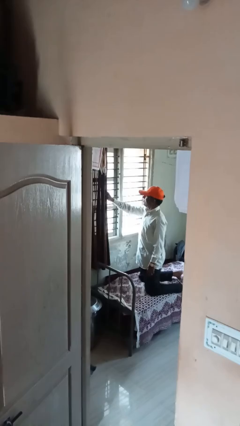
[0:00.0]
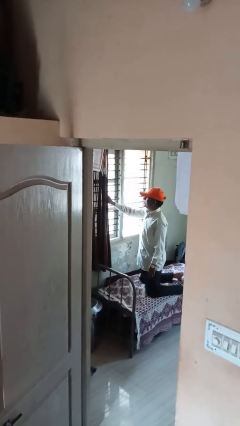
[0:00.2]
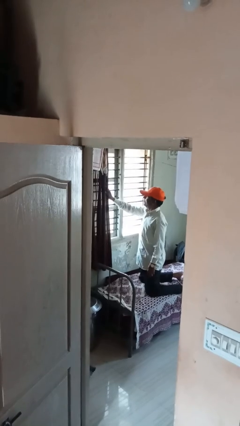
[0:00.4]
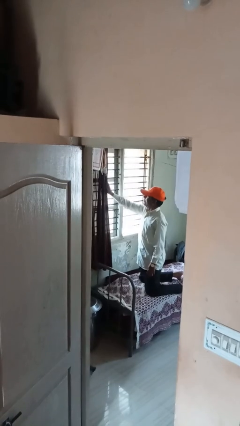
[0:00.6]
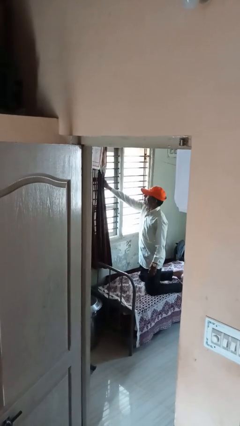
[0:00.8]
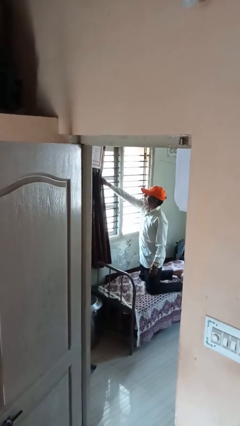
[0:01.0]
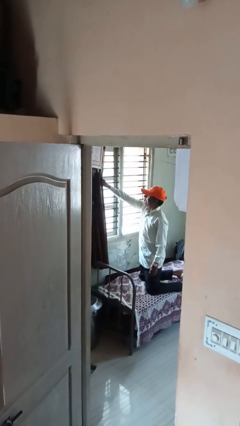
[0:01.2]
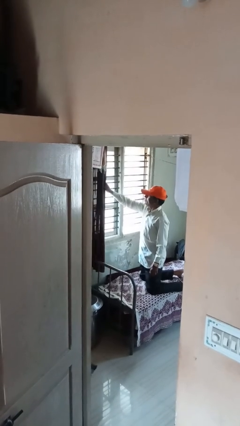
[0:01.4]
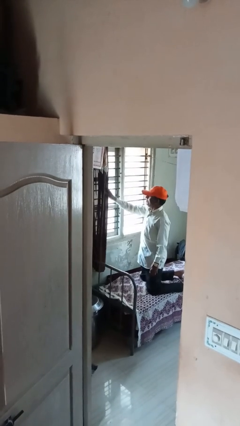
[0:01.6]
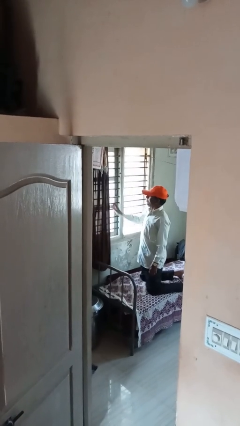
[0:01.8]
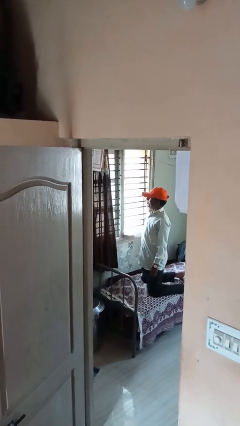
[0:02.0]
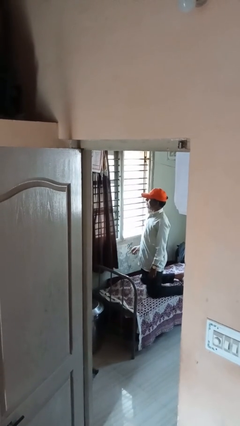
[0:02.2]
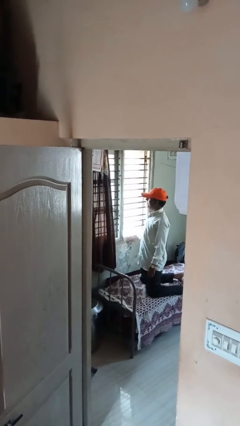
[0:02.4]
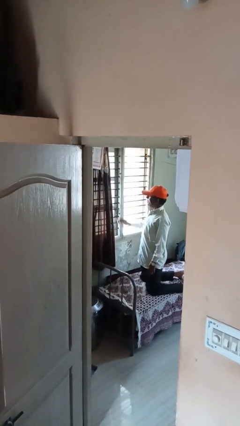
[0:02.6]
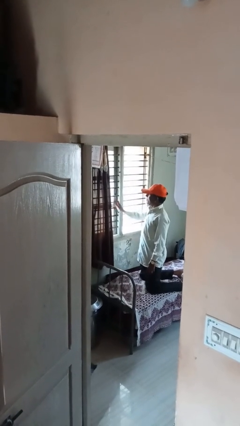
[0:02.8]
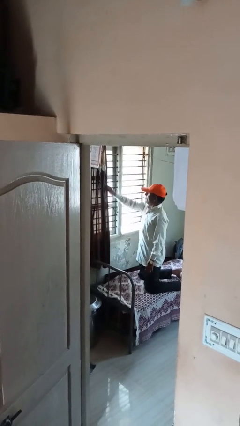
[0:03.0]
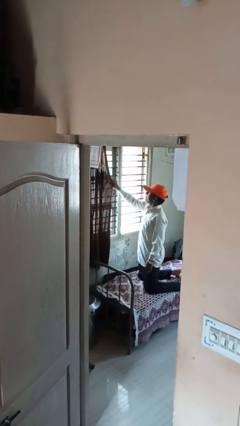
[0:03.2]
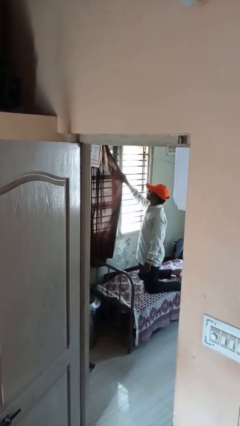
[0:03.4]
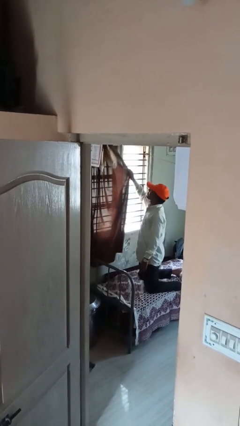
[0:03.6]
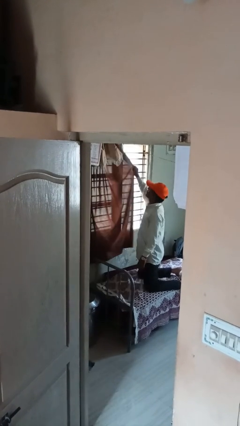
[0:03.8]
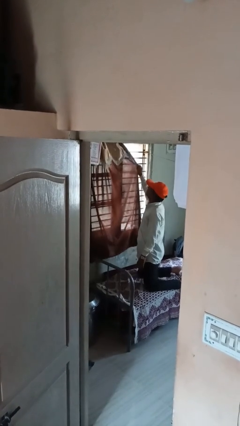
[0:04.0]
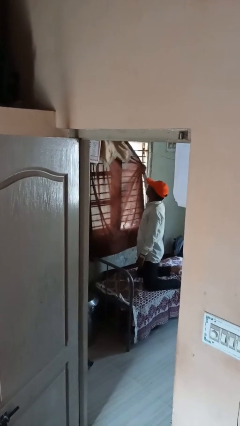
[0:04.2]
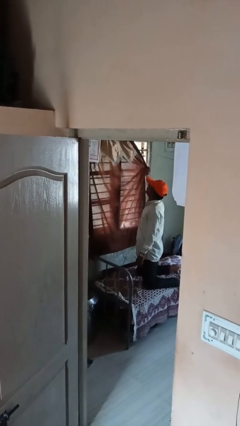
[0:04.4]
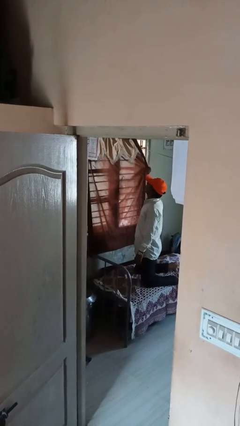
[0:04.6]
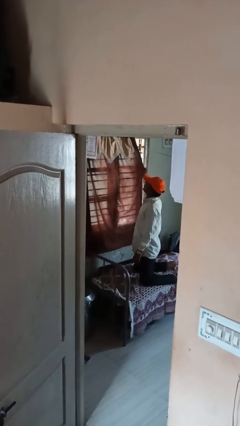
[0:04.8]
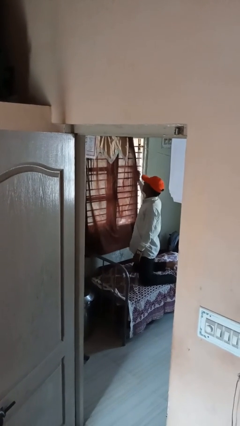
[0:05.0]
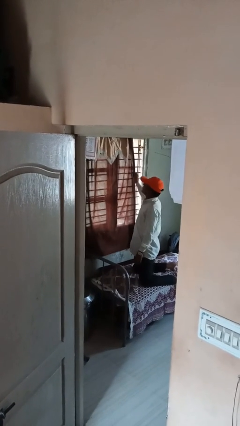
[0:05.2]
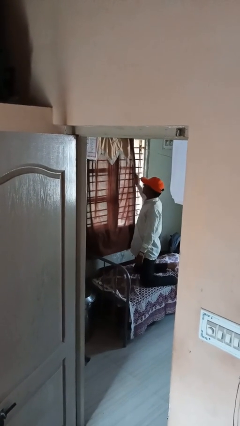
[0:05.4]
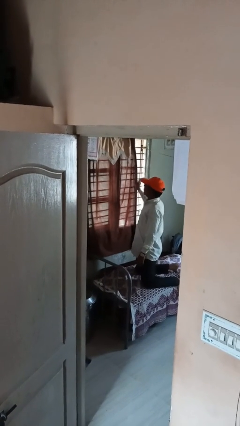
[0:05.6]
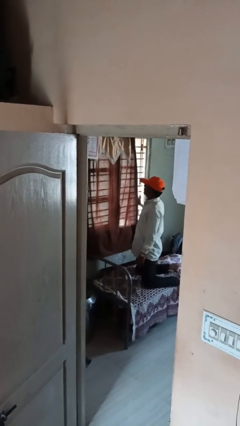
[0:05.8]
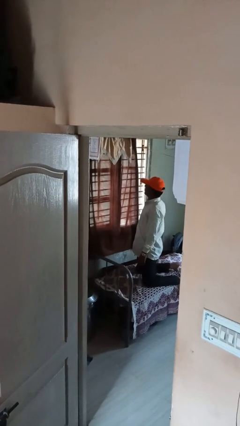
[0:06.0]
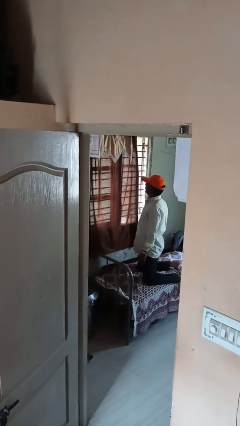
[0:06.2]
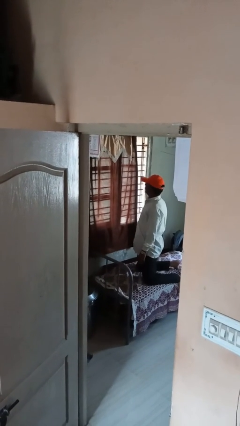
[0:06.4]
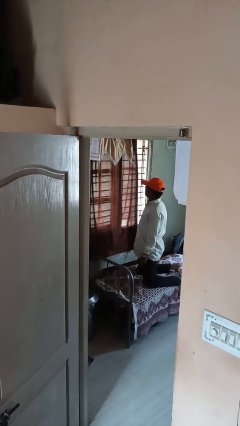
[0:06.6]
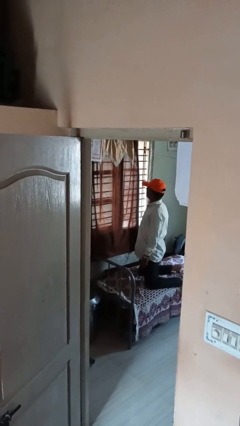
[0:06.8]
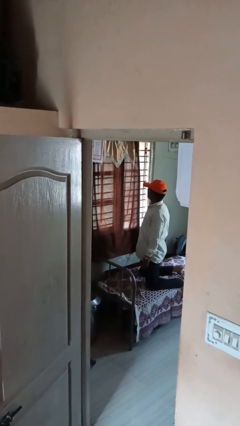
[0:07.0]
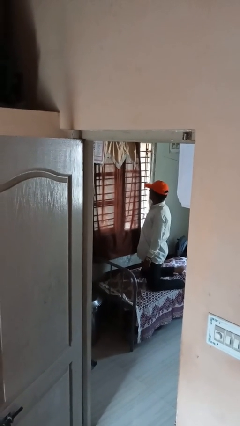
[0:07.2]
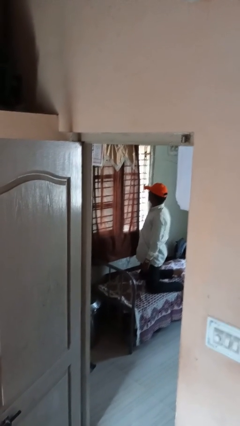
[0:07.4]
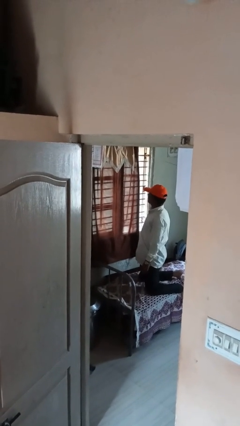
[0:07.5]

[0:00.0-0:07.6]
person closes curtains

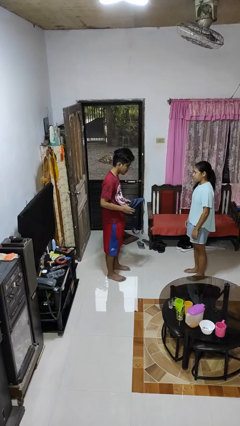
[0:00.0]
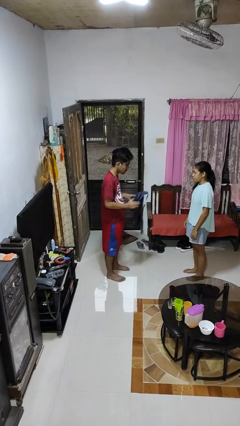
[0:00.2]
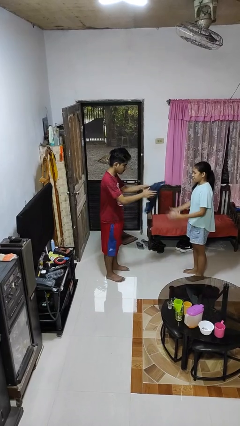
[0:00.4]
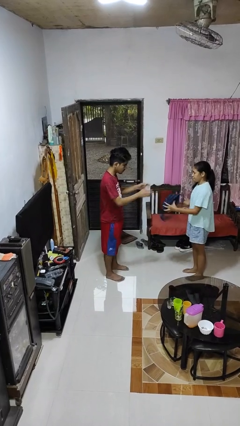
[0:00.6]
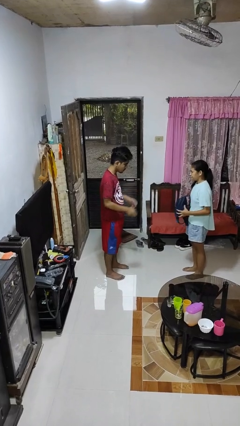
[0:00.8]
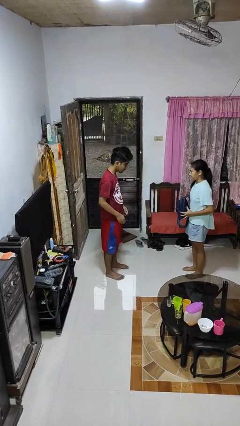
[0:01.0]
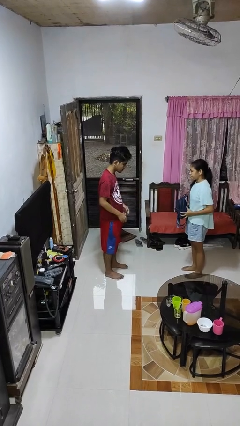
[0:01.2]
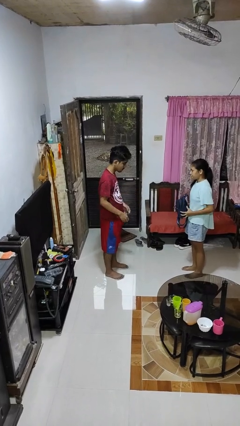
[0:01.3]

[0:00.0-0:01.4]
person throws object to person

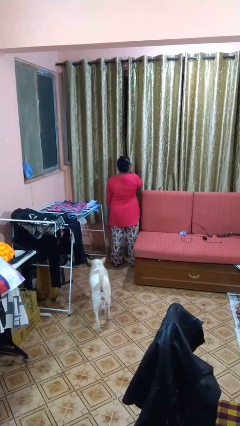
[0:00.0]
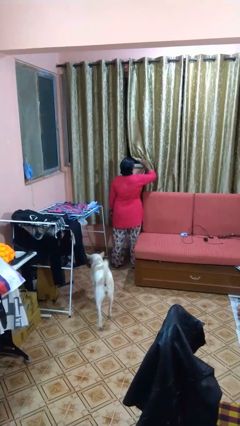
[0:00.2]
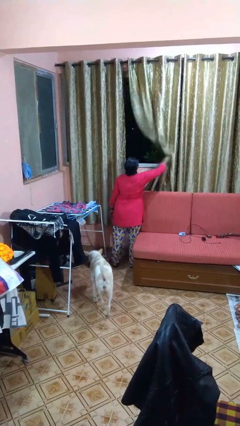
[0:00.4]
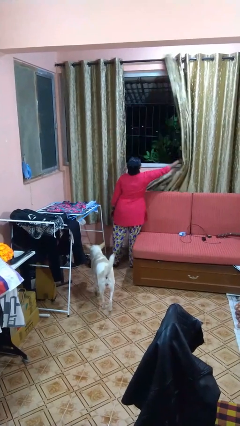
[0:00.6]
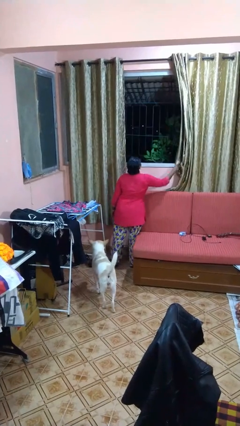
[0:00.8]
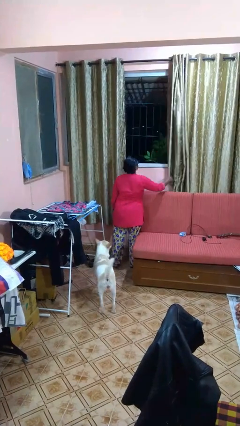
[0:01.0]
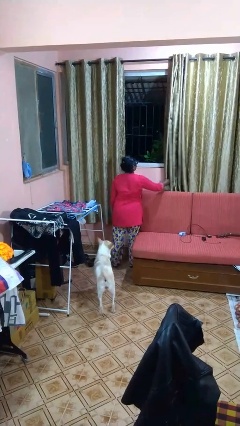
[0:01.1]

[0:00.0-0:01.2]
person opens curtains

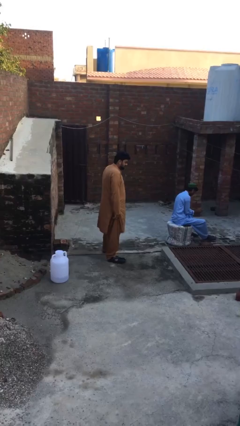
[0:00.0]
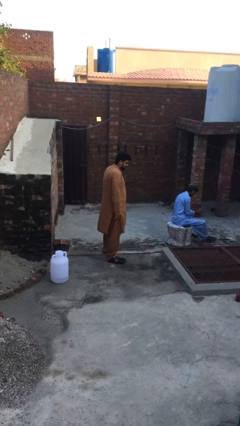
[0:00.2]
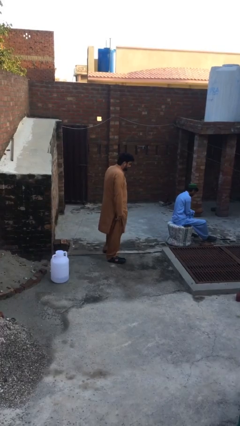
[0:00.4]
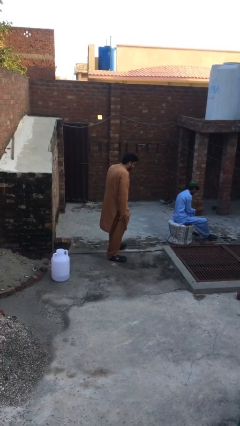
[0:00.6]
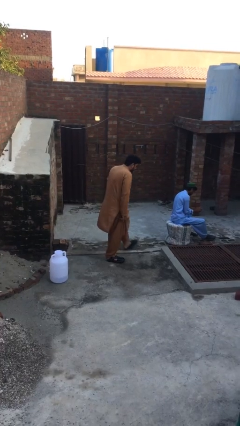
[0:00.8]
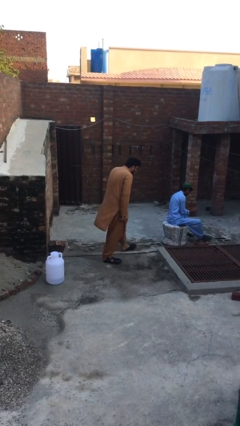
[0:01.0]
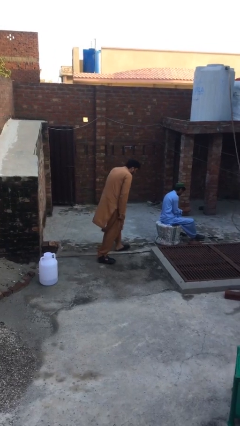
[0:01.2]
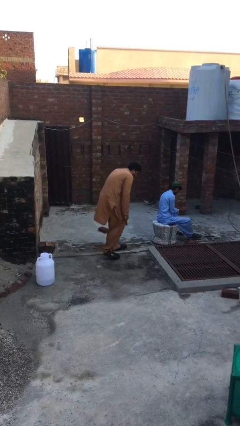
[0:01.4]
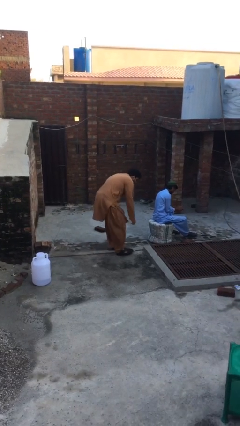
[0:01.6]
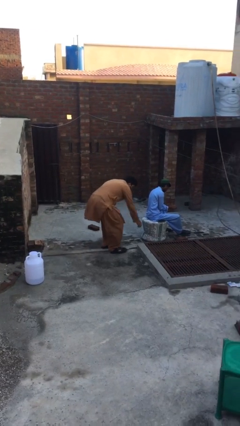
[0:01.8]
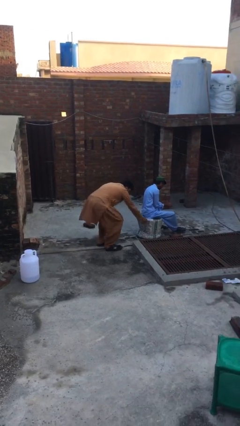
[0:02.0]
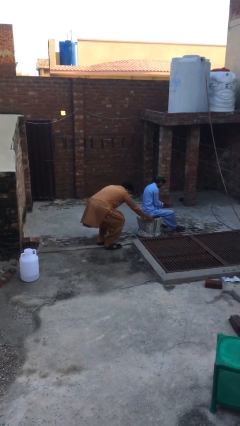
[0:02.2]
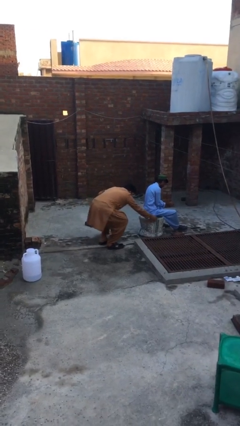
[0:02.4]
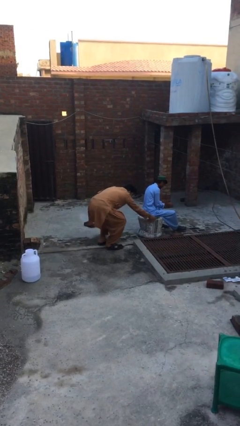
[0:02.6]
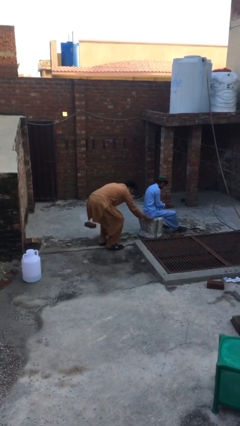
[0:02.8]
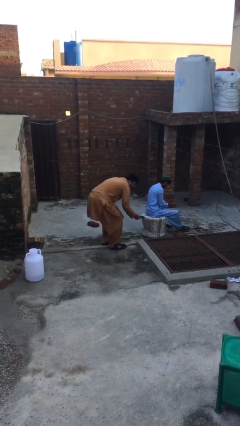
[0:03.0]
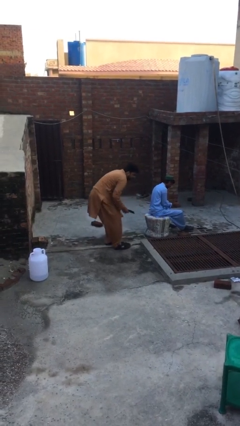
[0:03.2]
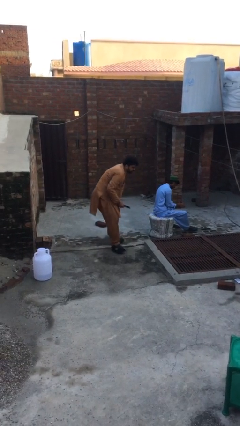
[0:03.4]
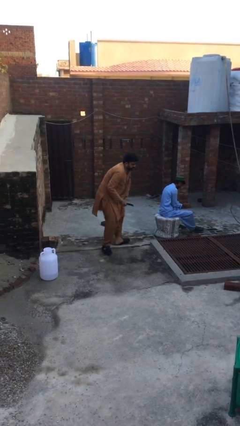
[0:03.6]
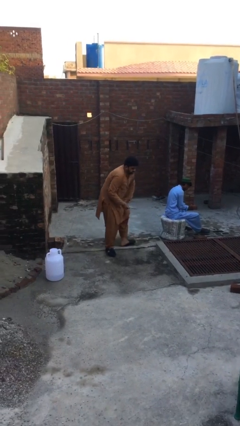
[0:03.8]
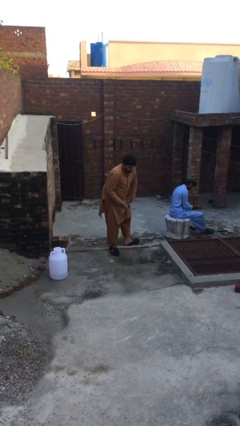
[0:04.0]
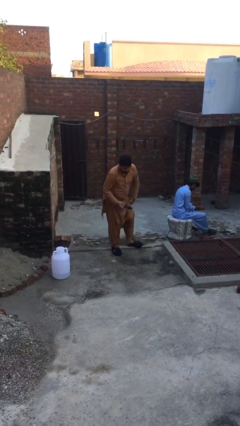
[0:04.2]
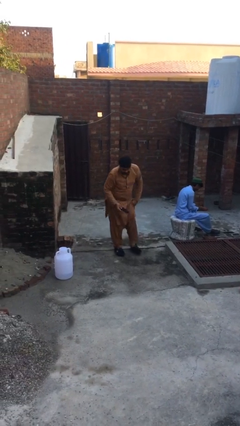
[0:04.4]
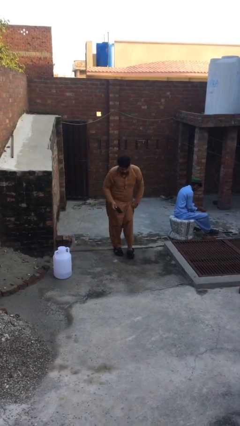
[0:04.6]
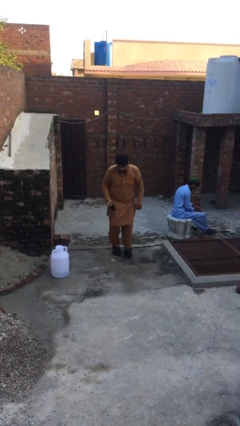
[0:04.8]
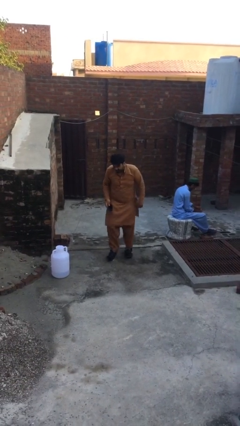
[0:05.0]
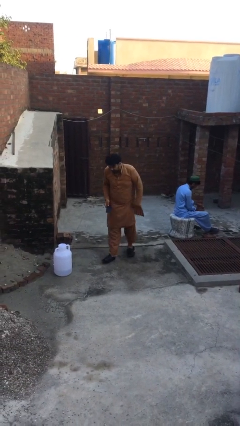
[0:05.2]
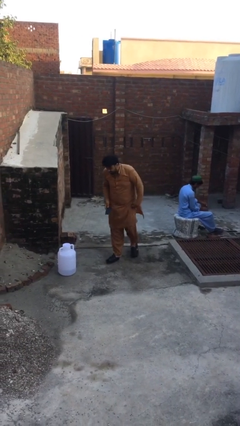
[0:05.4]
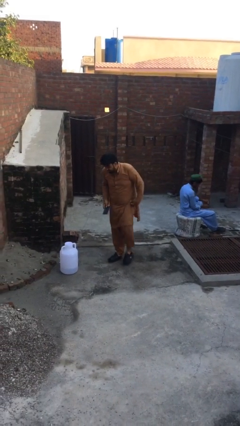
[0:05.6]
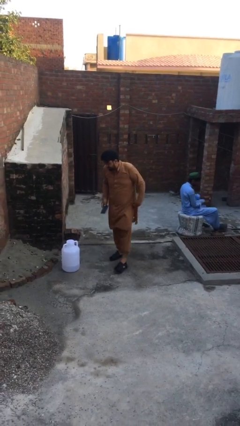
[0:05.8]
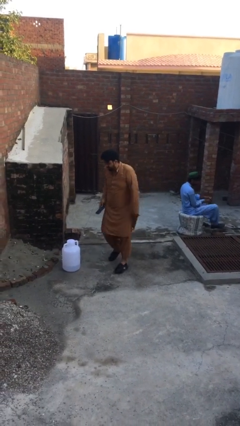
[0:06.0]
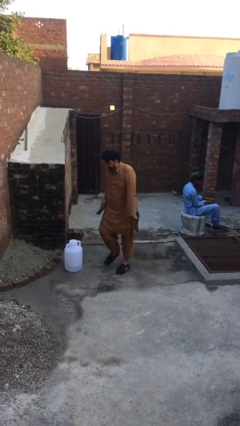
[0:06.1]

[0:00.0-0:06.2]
person steals object from person

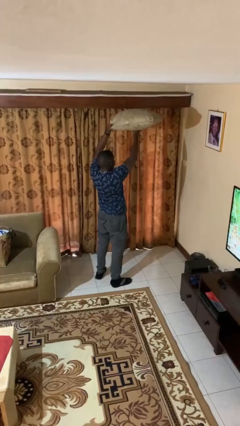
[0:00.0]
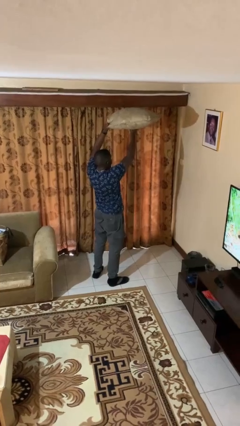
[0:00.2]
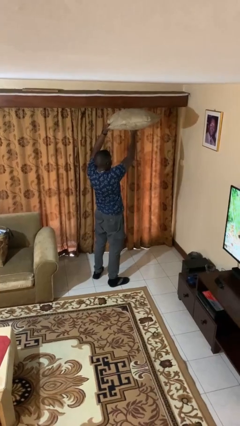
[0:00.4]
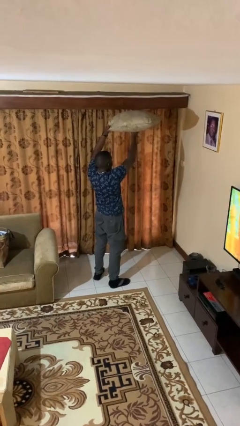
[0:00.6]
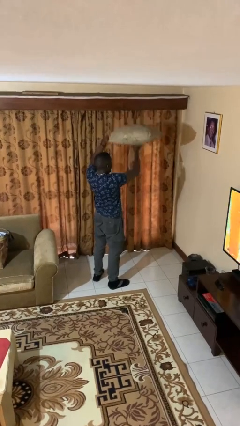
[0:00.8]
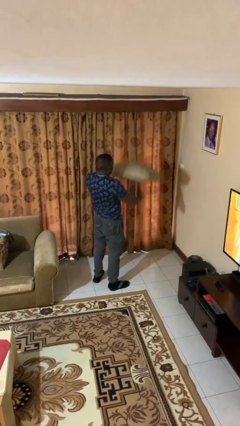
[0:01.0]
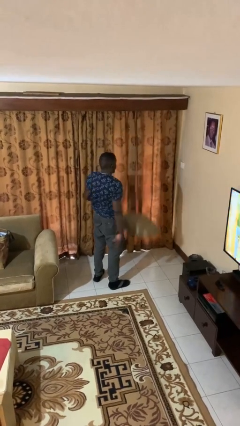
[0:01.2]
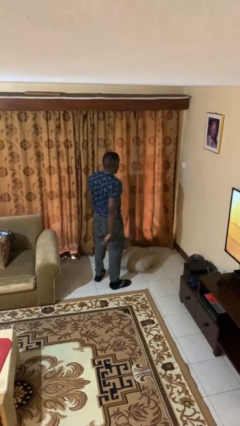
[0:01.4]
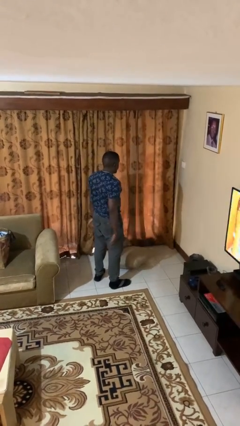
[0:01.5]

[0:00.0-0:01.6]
person drops object
